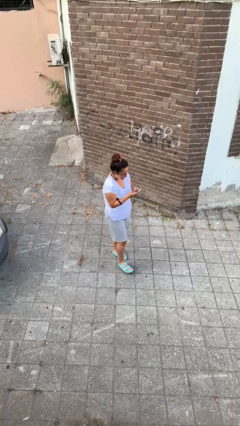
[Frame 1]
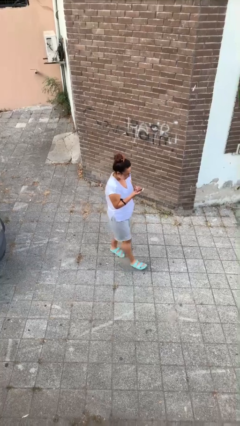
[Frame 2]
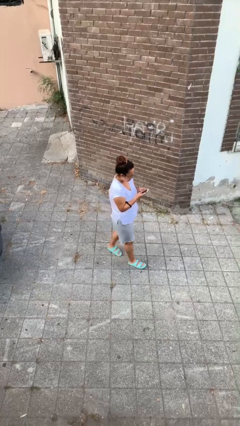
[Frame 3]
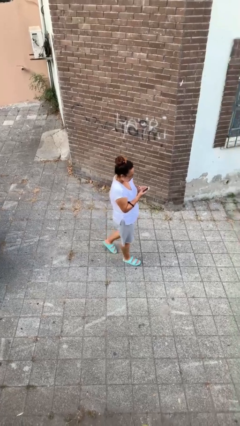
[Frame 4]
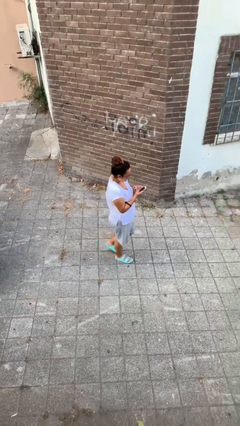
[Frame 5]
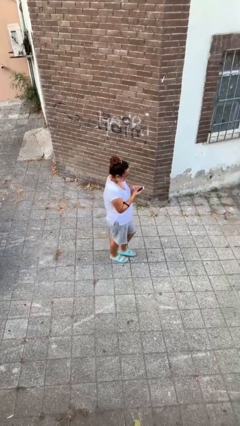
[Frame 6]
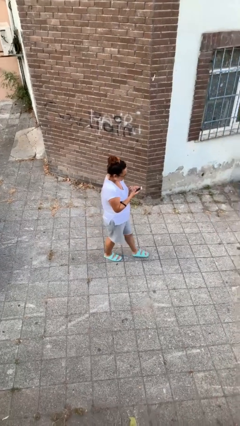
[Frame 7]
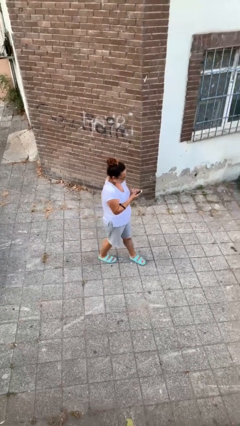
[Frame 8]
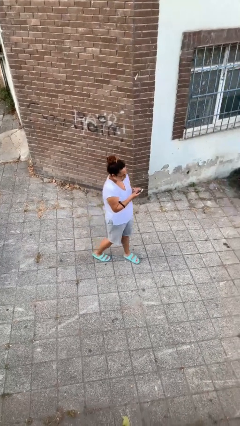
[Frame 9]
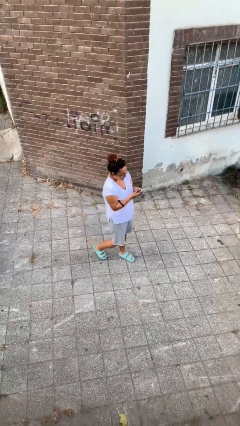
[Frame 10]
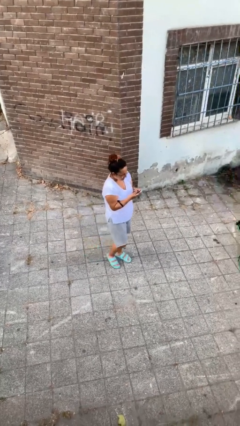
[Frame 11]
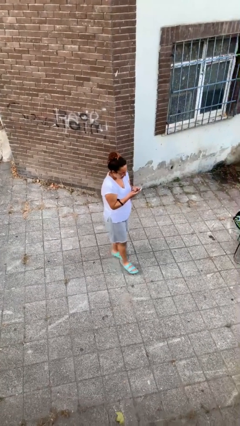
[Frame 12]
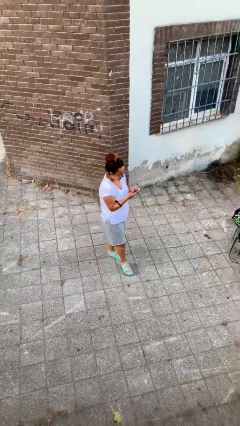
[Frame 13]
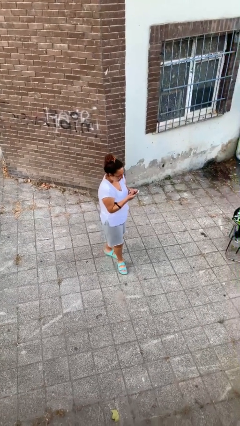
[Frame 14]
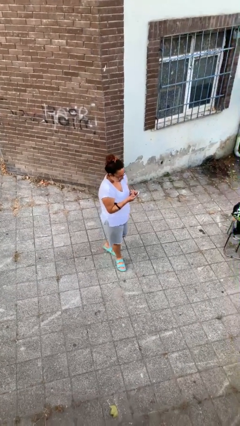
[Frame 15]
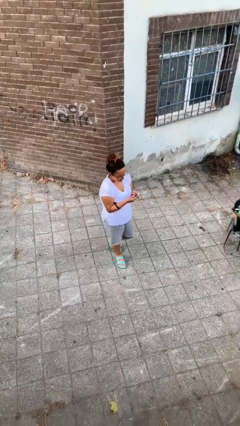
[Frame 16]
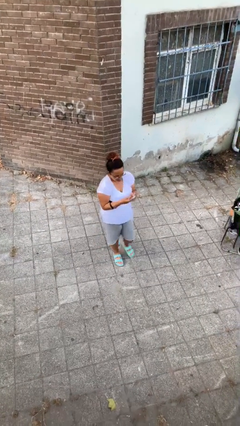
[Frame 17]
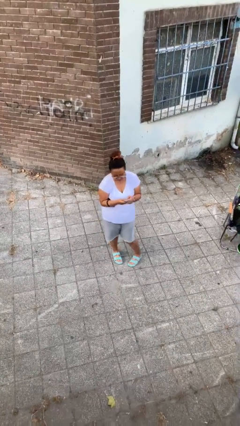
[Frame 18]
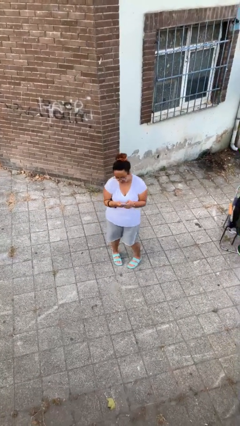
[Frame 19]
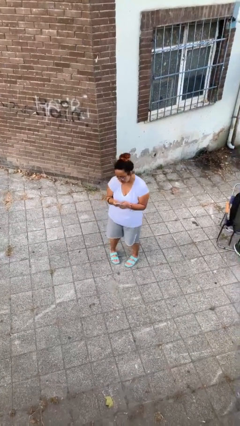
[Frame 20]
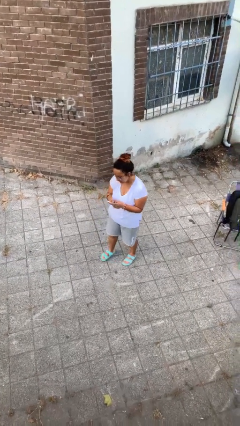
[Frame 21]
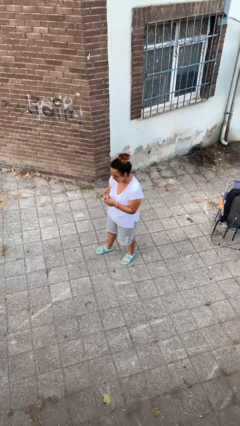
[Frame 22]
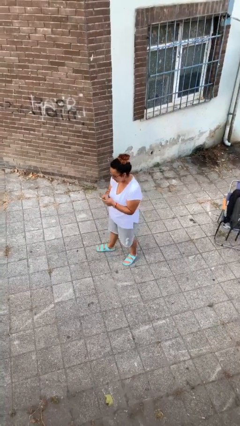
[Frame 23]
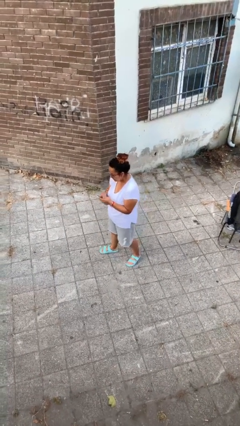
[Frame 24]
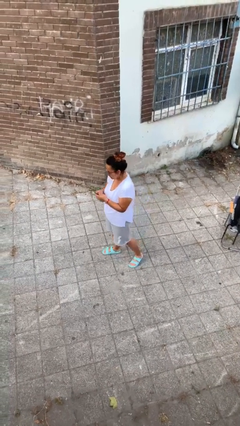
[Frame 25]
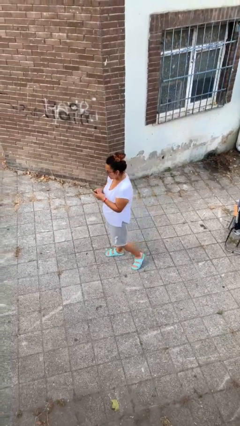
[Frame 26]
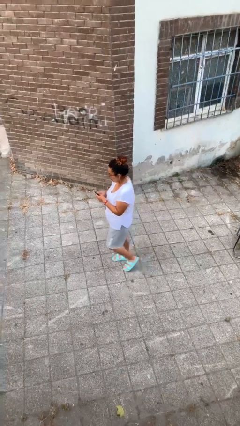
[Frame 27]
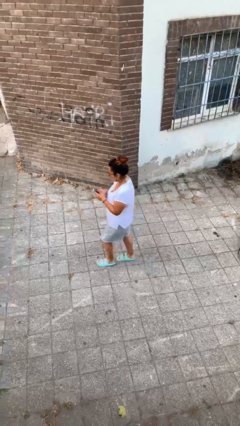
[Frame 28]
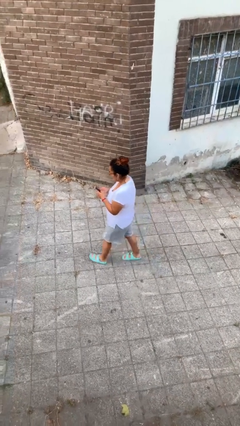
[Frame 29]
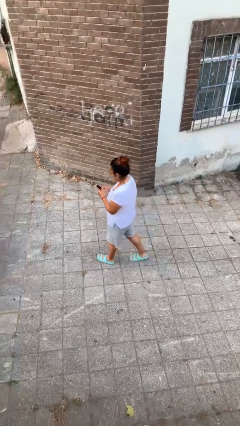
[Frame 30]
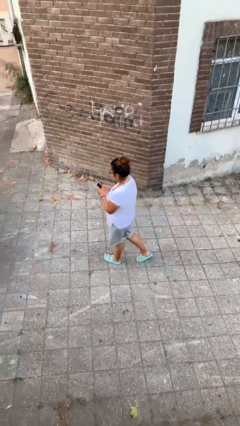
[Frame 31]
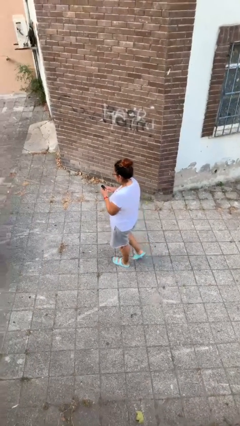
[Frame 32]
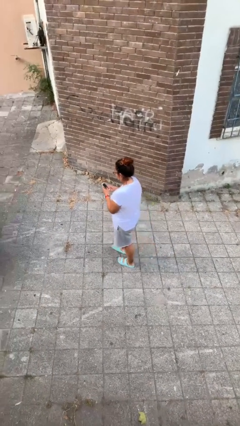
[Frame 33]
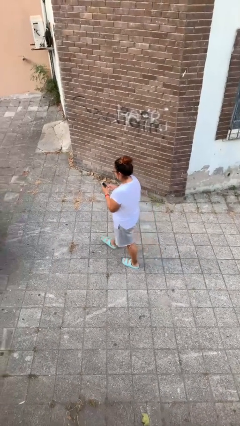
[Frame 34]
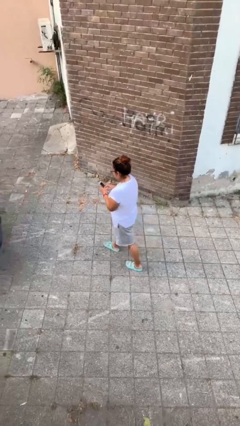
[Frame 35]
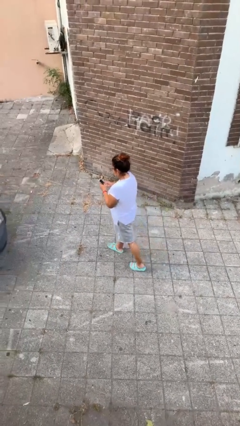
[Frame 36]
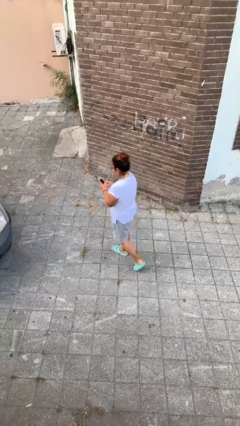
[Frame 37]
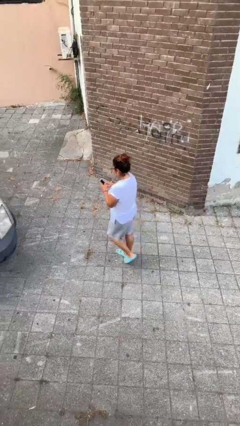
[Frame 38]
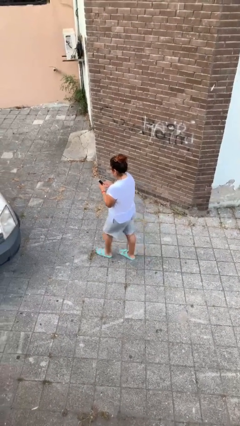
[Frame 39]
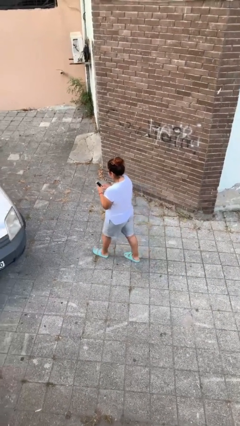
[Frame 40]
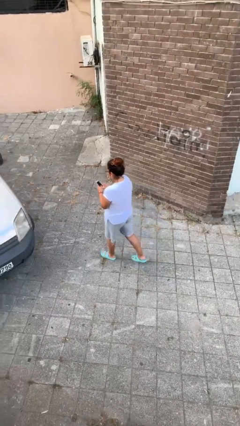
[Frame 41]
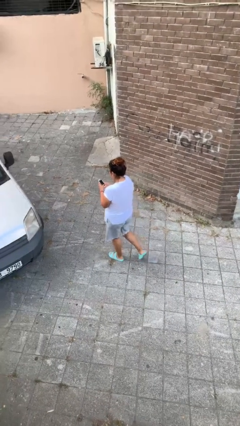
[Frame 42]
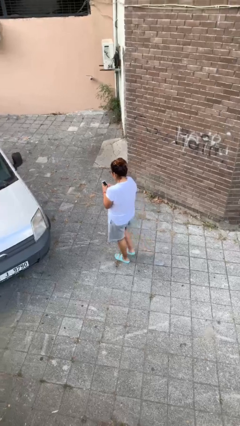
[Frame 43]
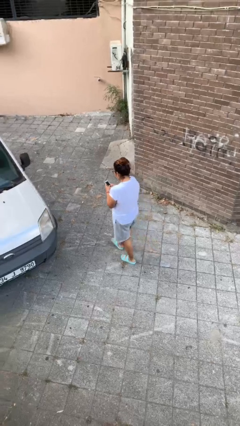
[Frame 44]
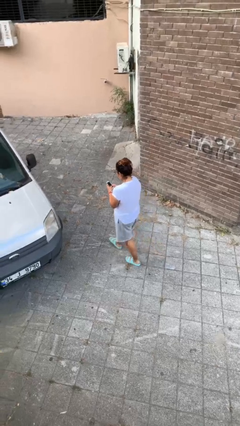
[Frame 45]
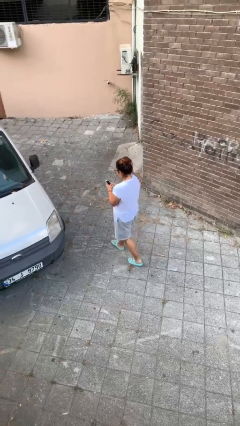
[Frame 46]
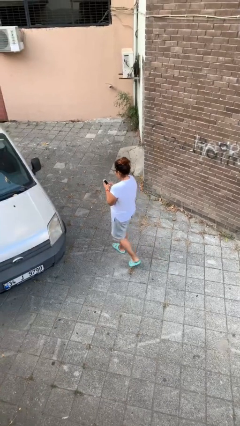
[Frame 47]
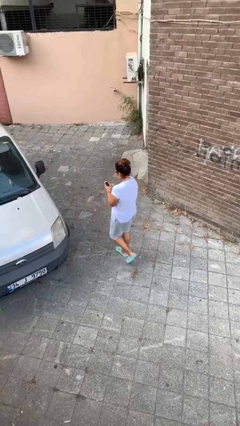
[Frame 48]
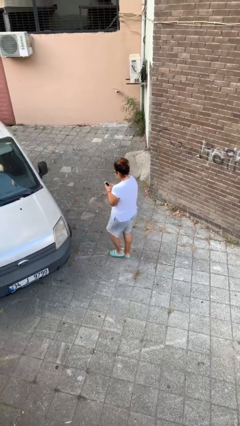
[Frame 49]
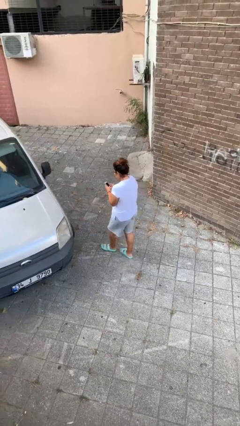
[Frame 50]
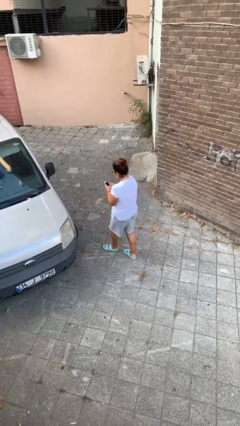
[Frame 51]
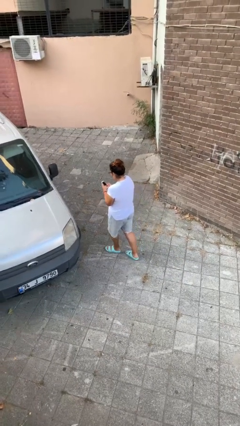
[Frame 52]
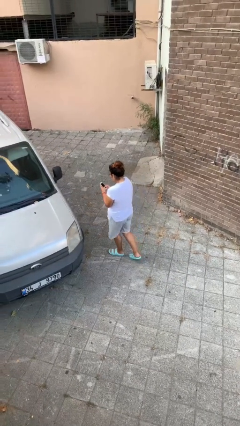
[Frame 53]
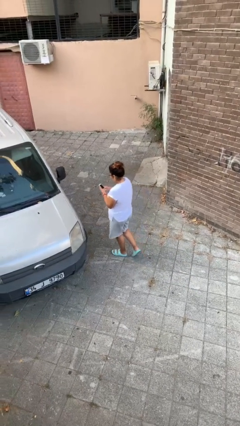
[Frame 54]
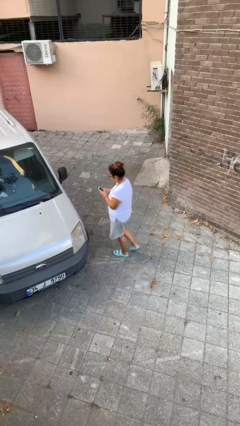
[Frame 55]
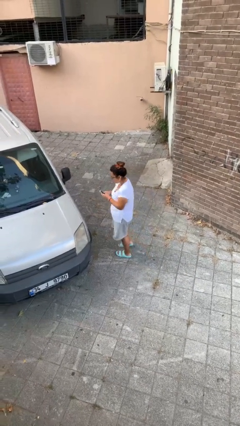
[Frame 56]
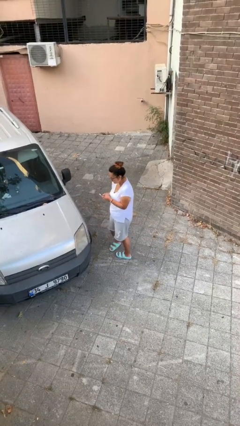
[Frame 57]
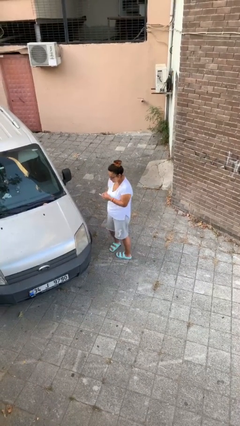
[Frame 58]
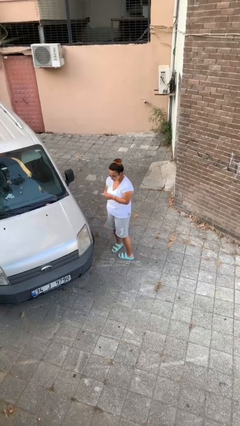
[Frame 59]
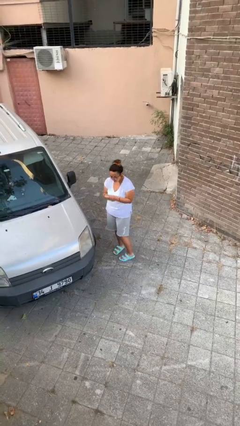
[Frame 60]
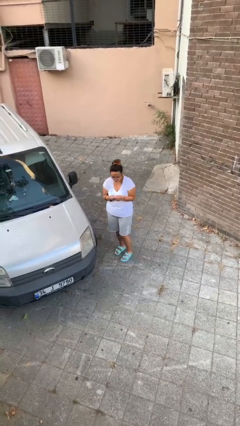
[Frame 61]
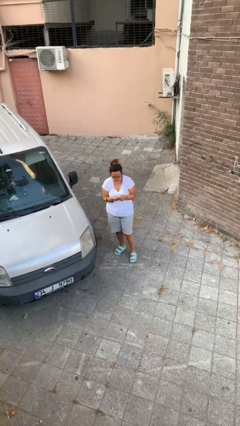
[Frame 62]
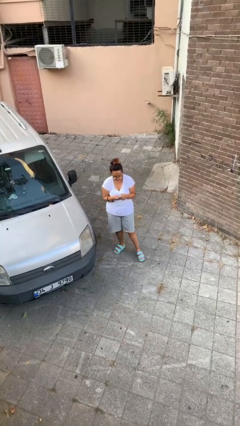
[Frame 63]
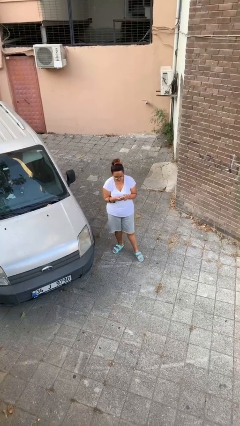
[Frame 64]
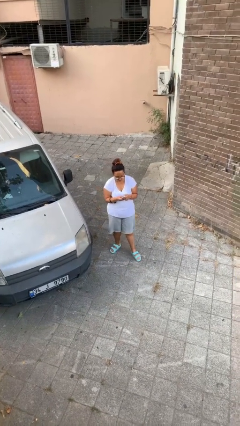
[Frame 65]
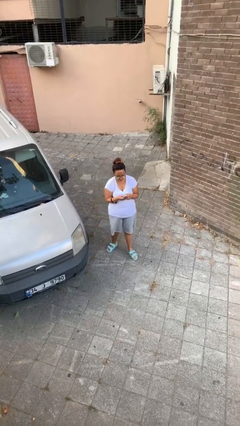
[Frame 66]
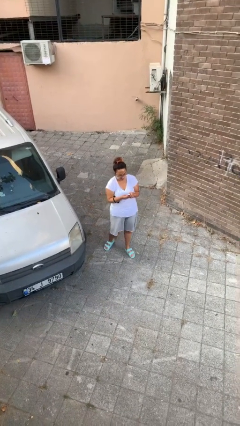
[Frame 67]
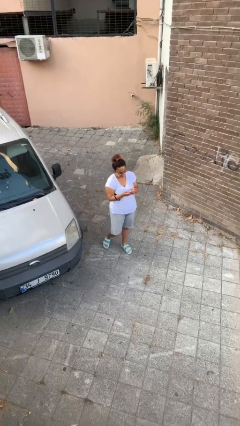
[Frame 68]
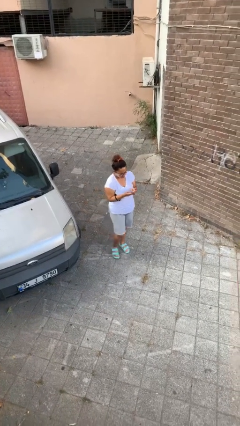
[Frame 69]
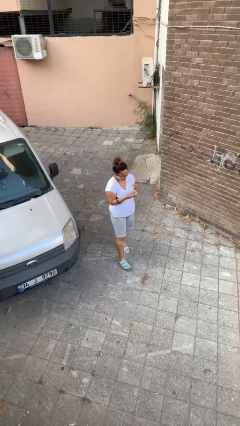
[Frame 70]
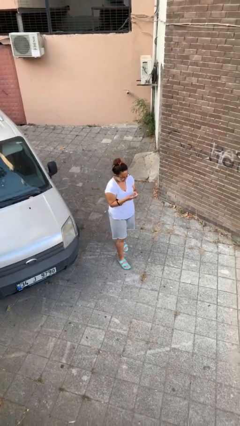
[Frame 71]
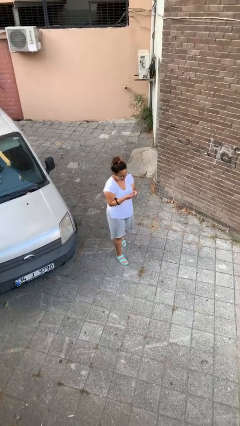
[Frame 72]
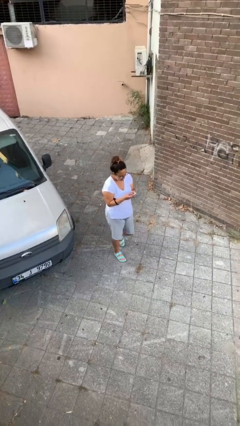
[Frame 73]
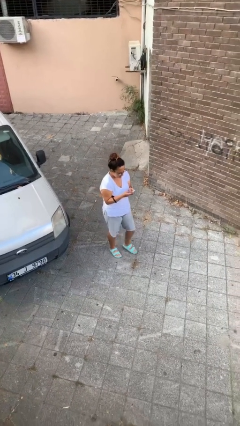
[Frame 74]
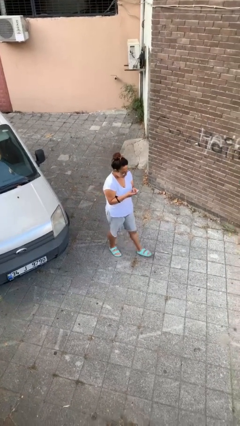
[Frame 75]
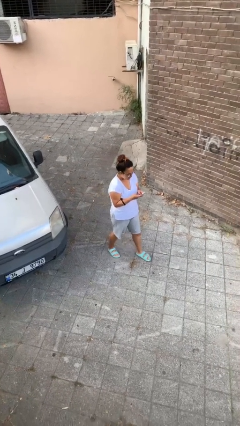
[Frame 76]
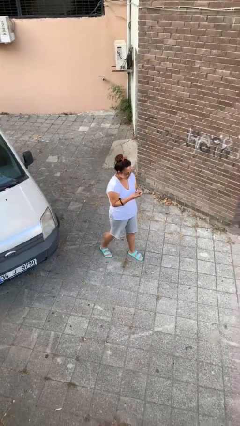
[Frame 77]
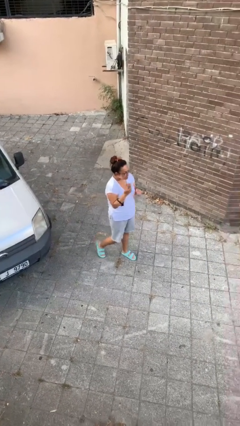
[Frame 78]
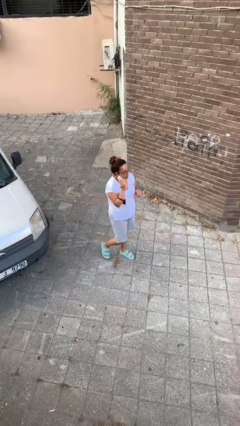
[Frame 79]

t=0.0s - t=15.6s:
person texts on phone

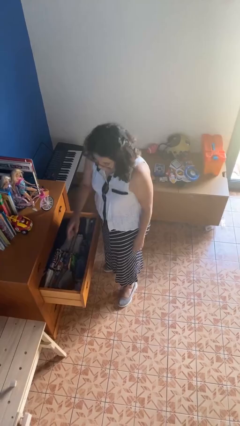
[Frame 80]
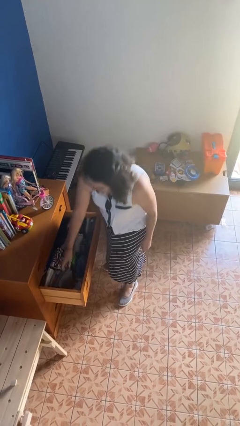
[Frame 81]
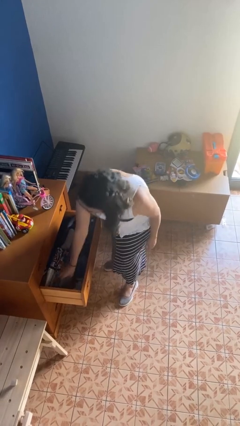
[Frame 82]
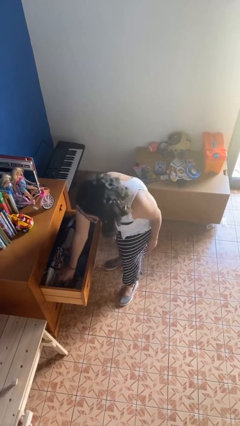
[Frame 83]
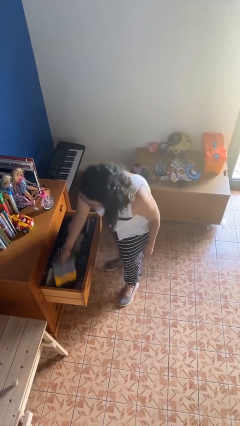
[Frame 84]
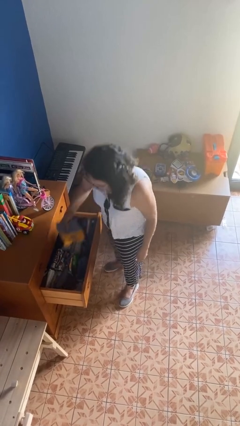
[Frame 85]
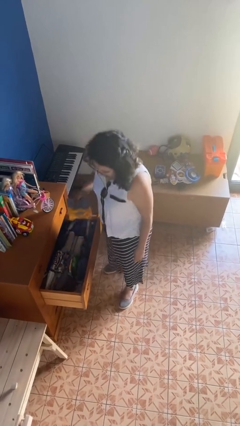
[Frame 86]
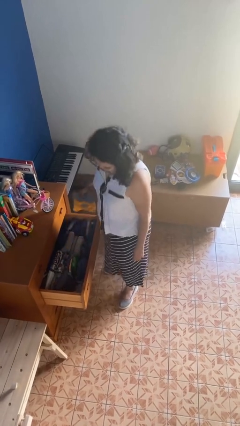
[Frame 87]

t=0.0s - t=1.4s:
person takes clothes from dresser

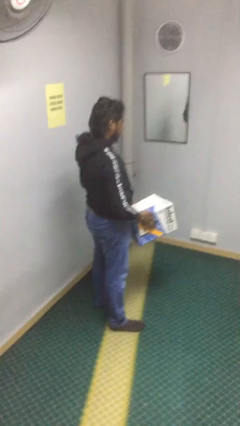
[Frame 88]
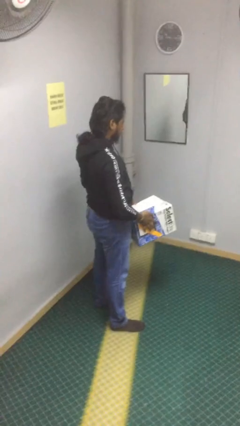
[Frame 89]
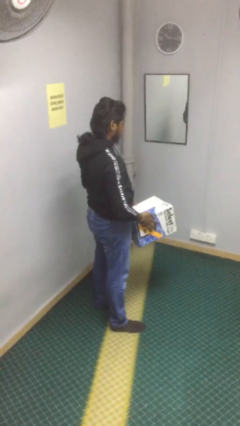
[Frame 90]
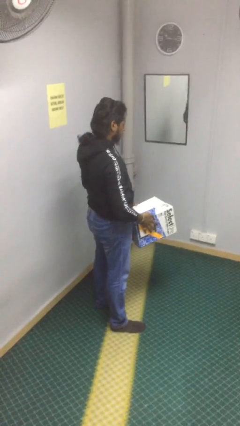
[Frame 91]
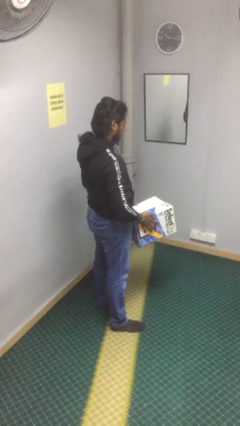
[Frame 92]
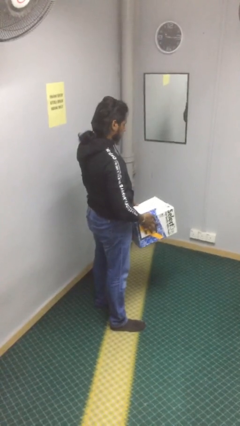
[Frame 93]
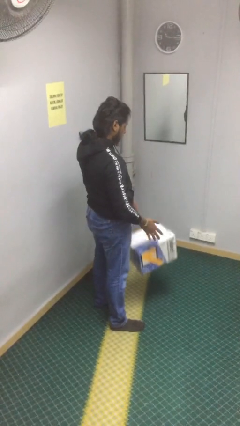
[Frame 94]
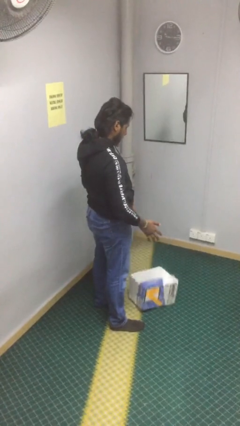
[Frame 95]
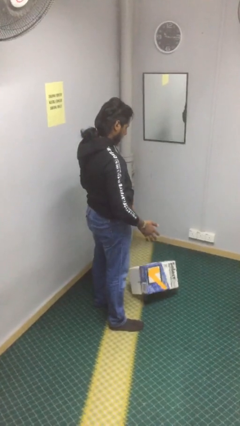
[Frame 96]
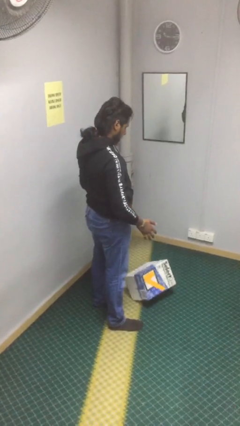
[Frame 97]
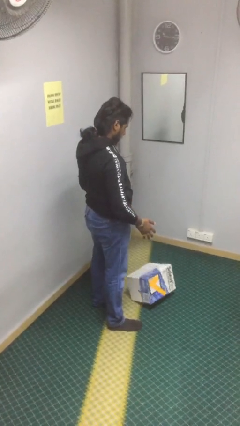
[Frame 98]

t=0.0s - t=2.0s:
person drops object
